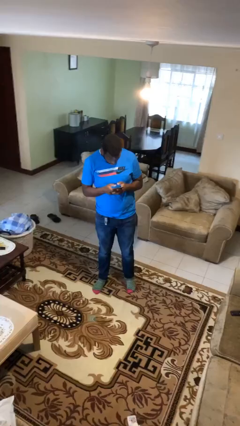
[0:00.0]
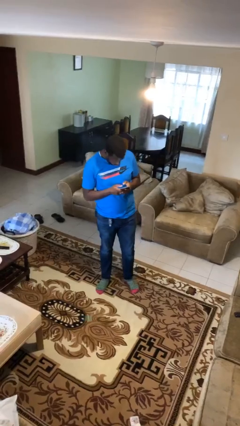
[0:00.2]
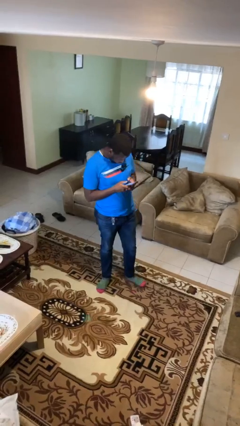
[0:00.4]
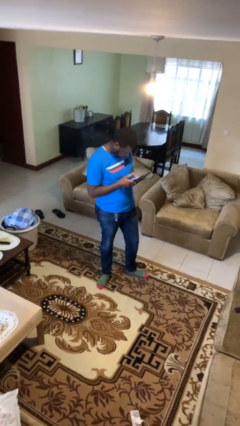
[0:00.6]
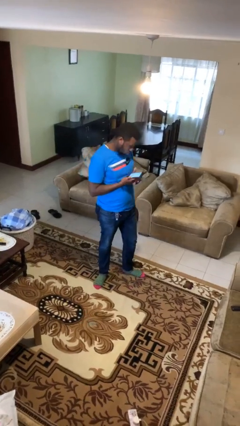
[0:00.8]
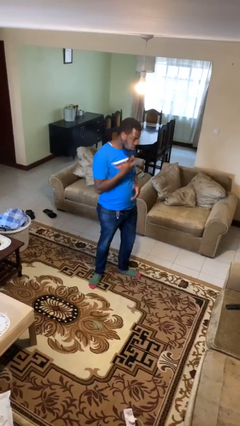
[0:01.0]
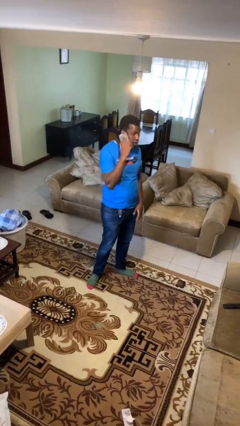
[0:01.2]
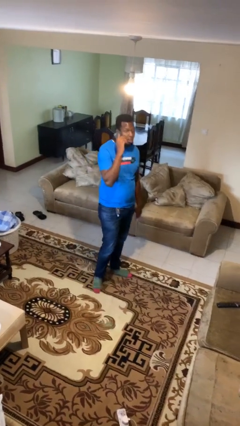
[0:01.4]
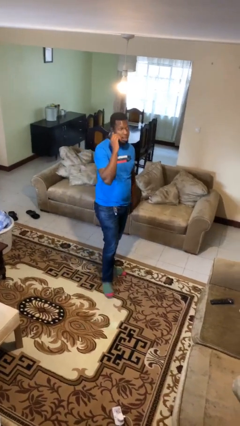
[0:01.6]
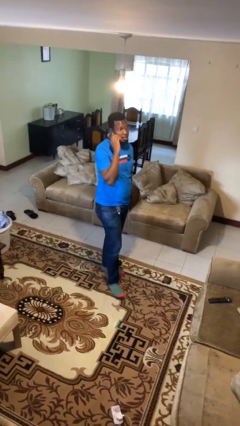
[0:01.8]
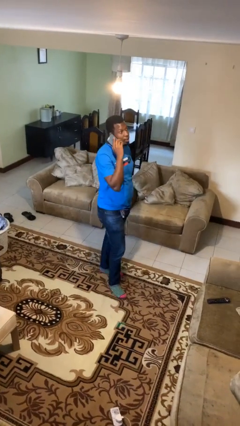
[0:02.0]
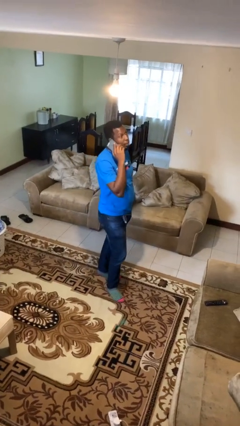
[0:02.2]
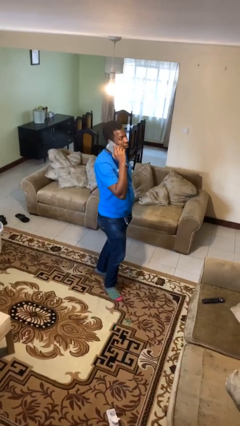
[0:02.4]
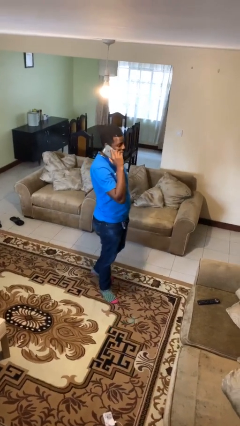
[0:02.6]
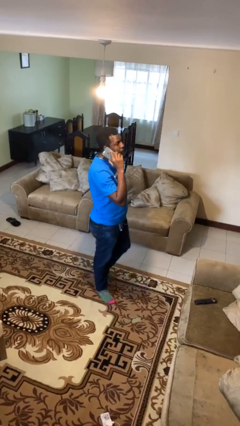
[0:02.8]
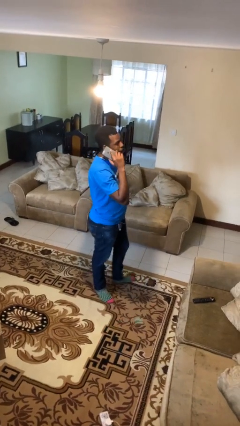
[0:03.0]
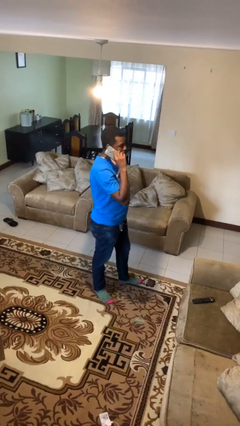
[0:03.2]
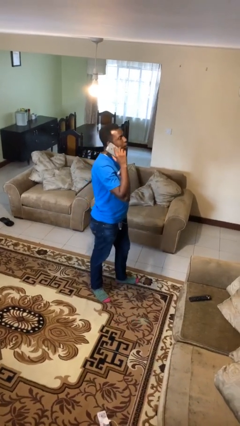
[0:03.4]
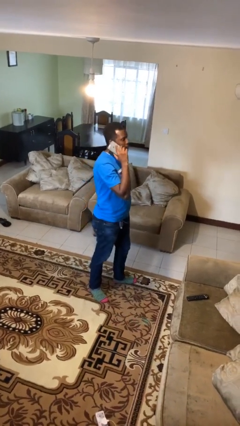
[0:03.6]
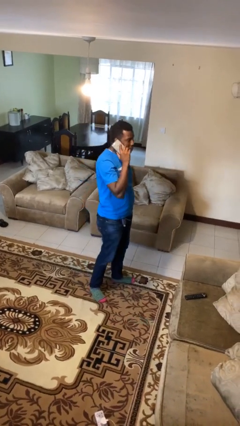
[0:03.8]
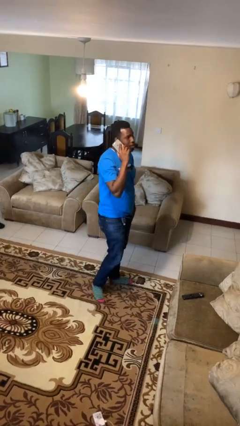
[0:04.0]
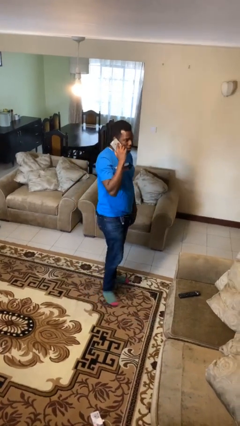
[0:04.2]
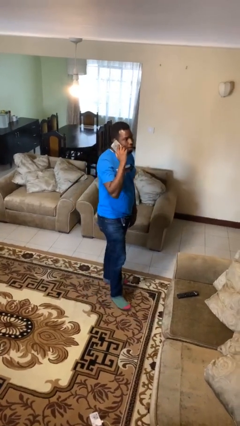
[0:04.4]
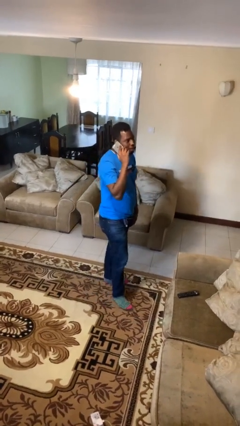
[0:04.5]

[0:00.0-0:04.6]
person talks on phone

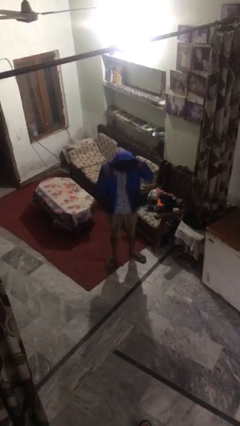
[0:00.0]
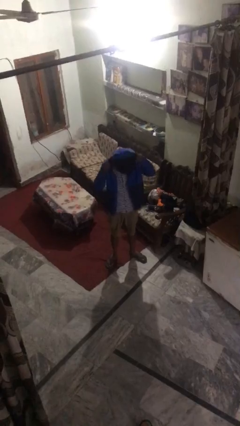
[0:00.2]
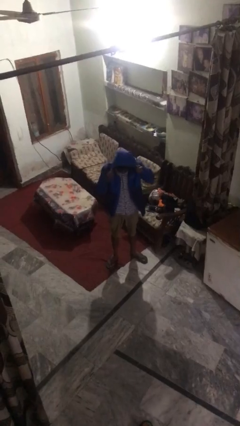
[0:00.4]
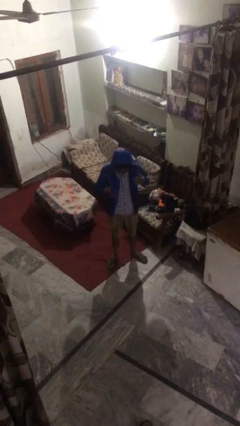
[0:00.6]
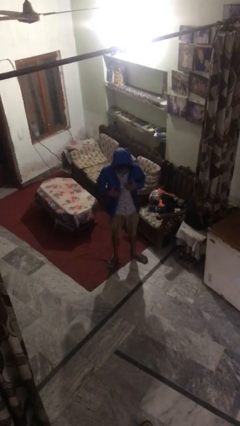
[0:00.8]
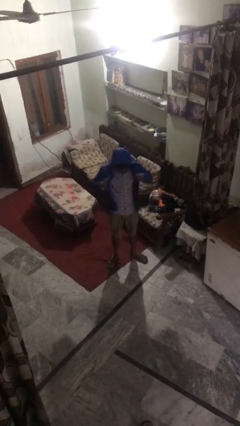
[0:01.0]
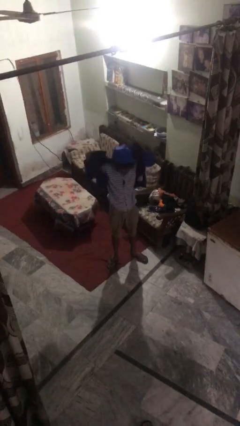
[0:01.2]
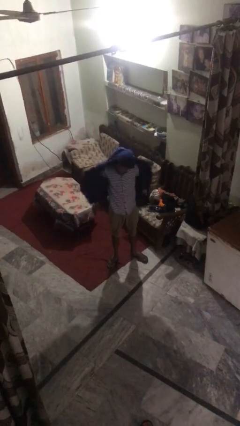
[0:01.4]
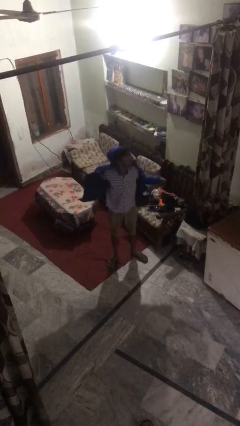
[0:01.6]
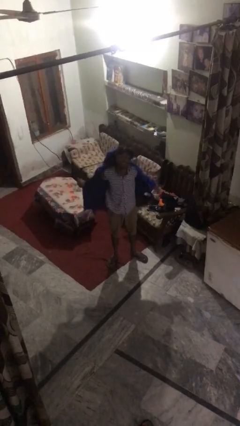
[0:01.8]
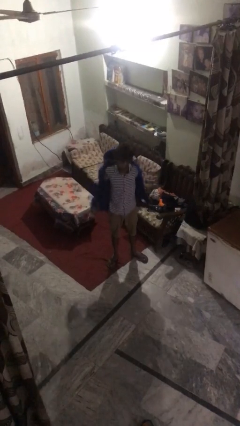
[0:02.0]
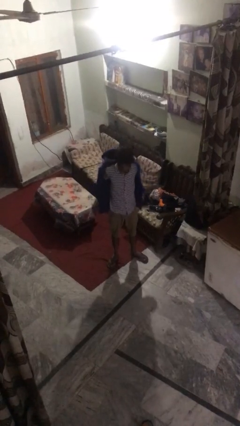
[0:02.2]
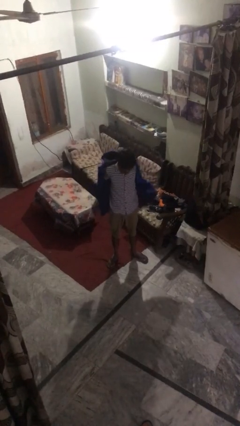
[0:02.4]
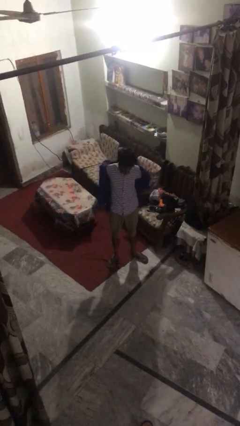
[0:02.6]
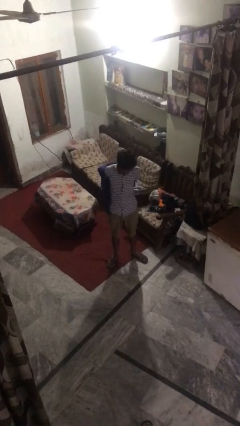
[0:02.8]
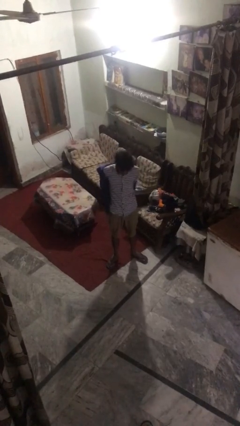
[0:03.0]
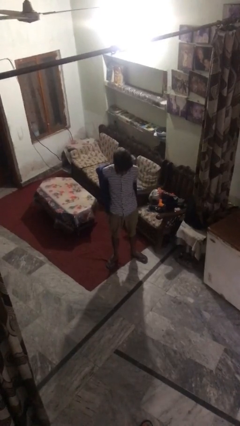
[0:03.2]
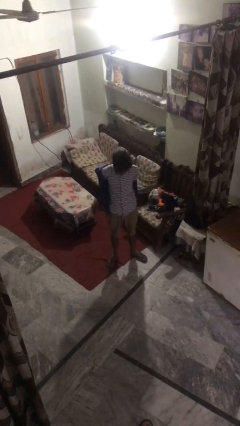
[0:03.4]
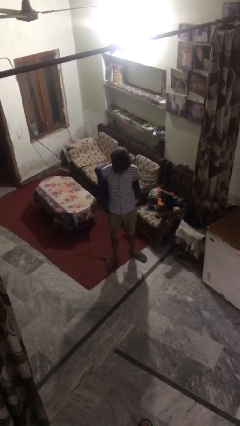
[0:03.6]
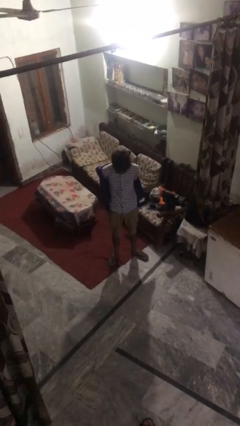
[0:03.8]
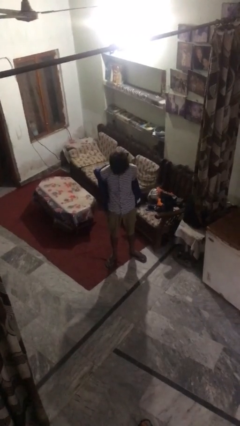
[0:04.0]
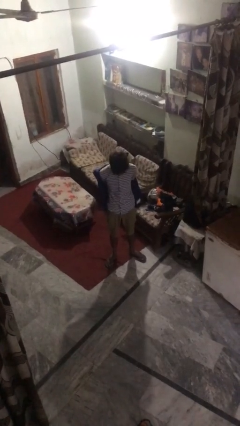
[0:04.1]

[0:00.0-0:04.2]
person takes off hoodie

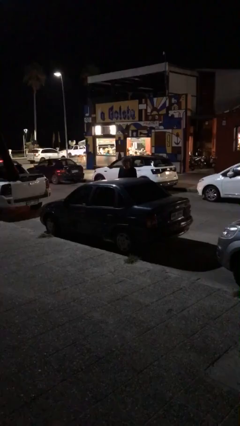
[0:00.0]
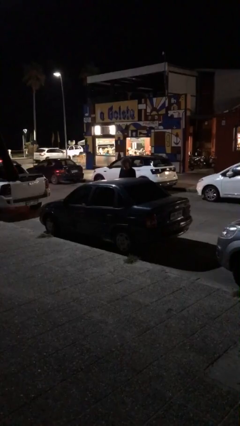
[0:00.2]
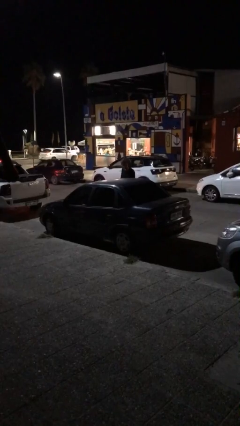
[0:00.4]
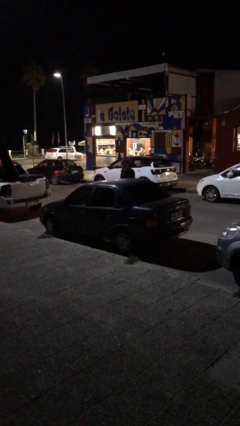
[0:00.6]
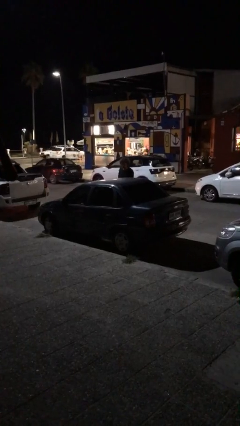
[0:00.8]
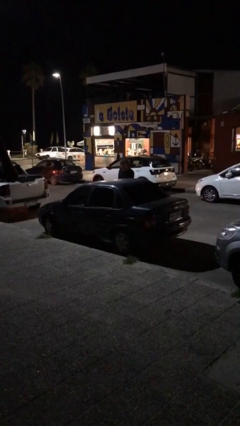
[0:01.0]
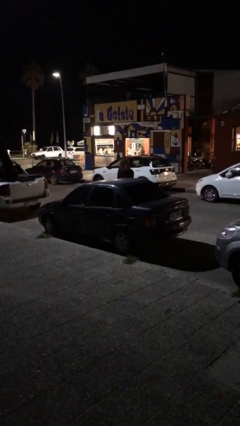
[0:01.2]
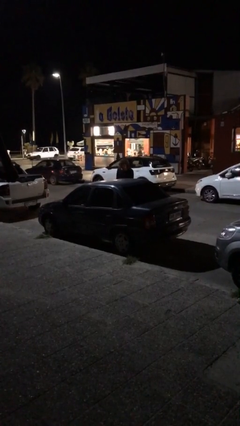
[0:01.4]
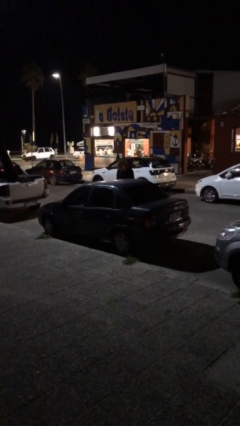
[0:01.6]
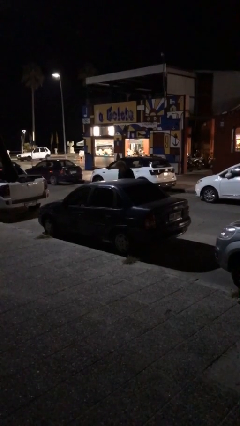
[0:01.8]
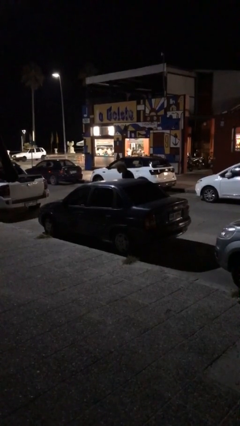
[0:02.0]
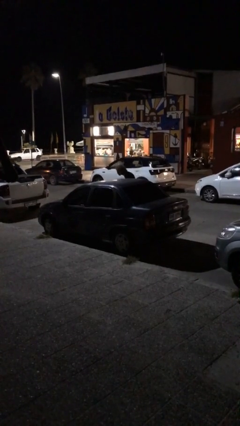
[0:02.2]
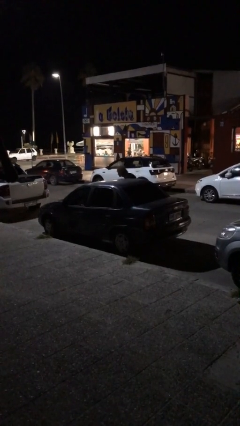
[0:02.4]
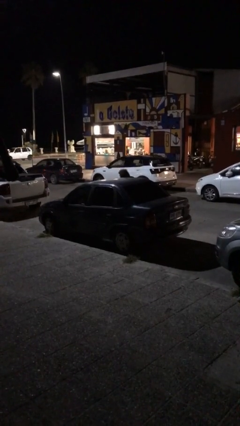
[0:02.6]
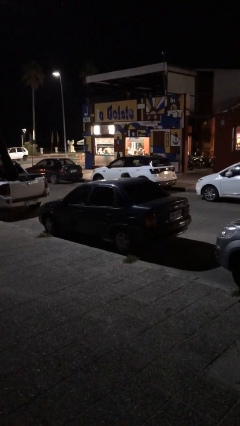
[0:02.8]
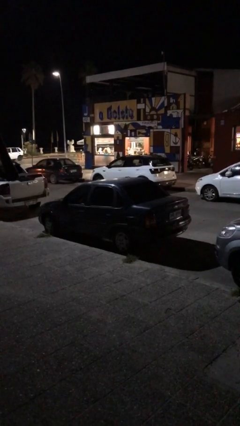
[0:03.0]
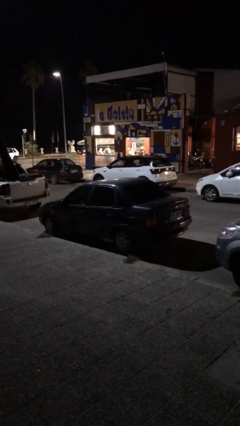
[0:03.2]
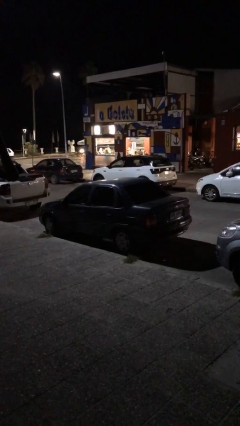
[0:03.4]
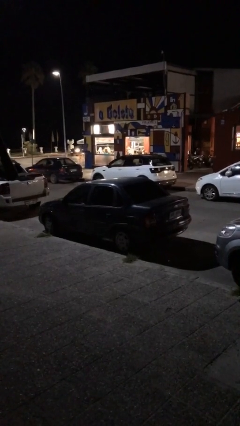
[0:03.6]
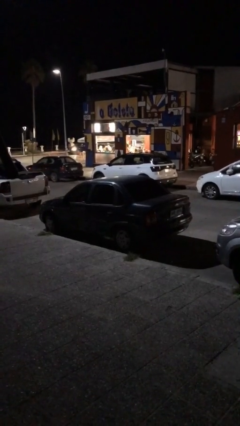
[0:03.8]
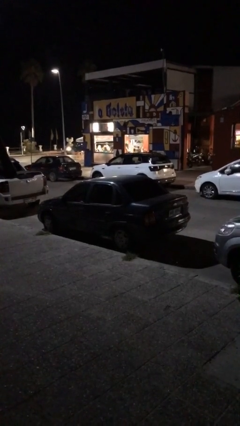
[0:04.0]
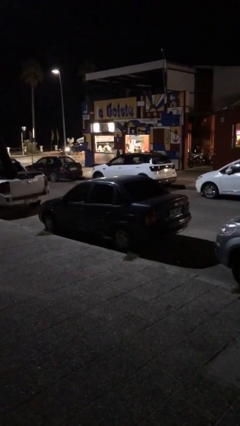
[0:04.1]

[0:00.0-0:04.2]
car picks up person

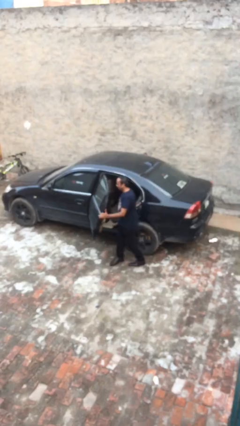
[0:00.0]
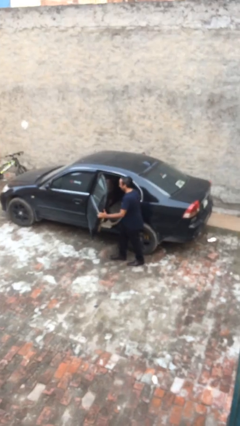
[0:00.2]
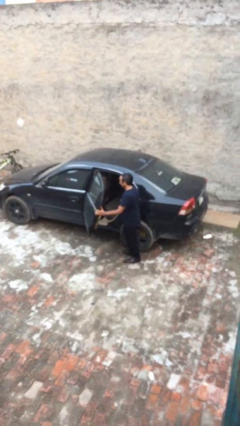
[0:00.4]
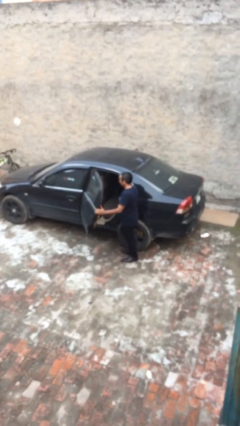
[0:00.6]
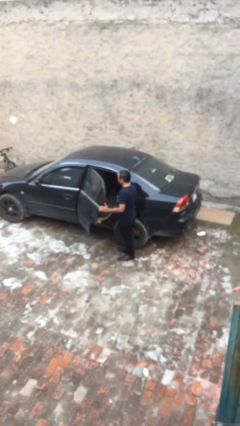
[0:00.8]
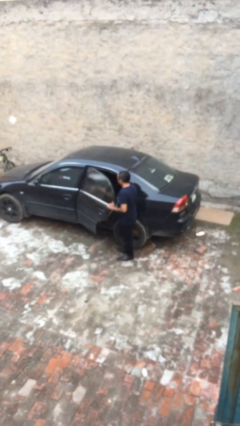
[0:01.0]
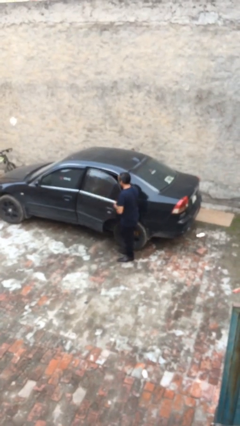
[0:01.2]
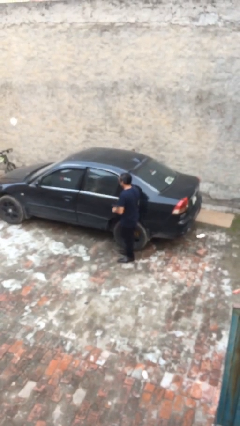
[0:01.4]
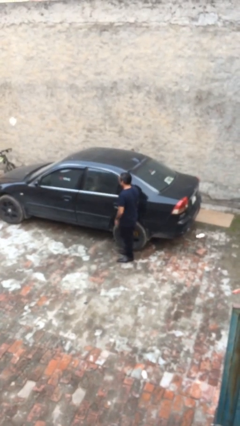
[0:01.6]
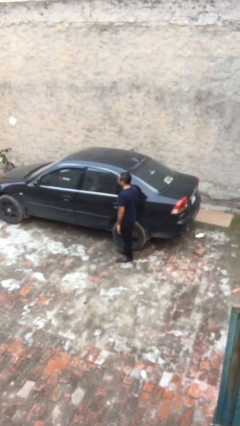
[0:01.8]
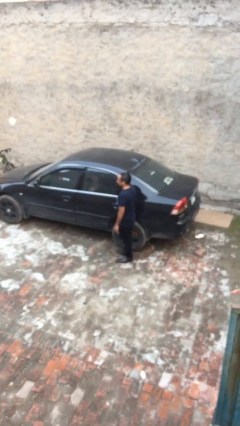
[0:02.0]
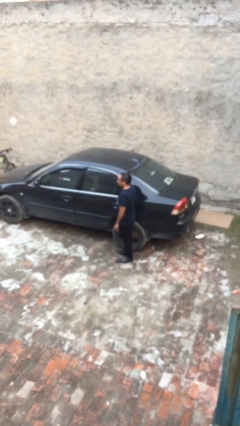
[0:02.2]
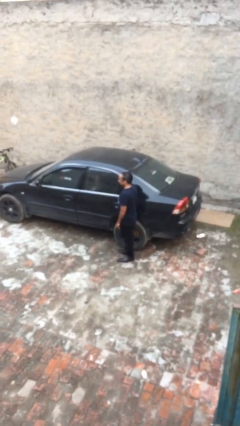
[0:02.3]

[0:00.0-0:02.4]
person closes car door

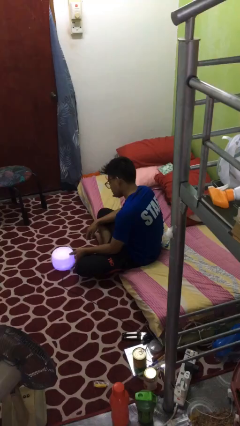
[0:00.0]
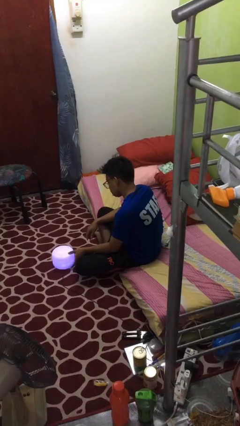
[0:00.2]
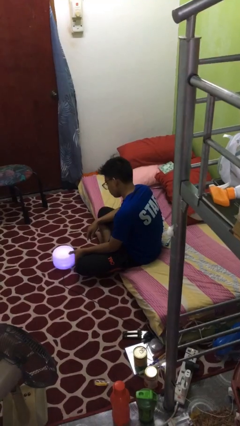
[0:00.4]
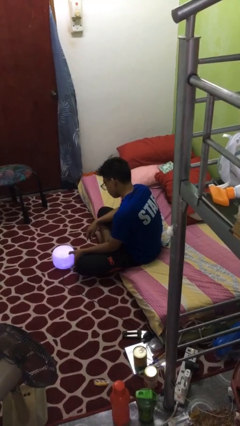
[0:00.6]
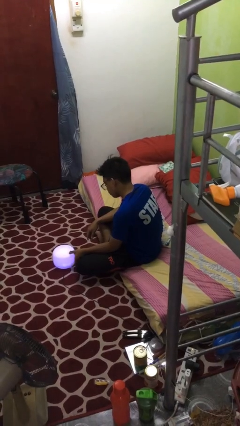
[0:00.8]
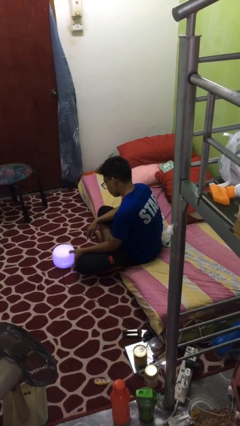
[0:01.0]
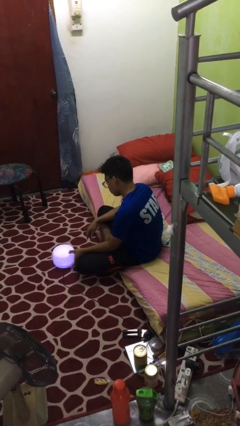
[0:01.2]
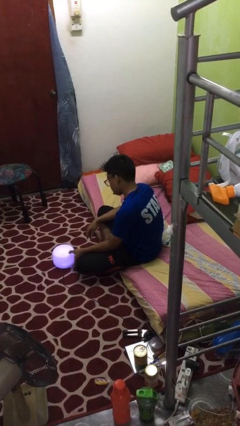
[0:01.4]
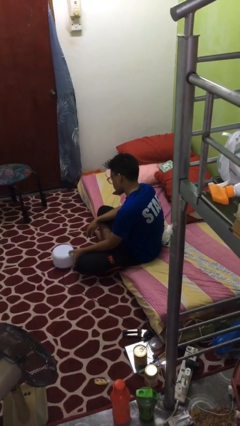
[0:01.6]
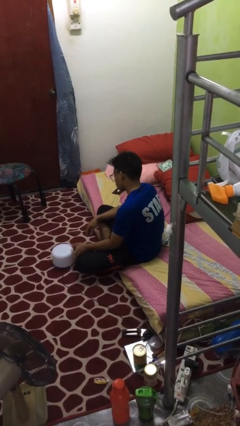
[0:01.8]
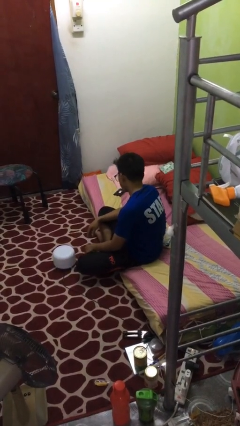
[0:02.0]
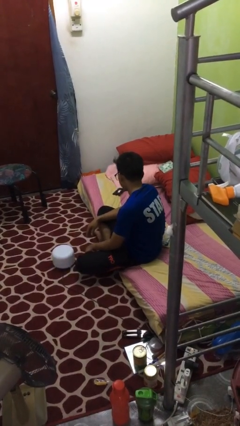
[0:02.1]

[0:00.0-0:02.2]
person turns off lamp
